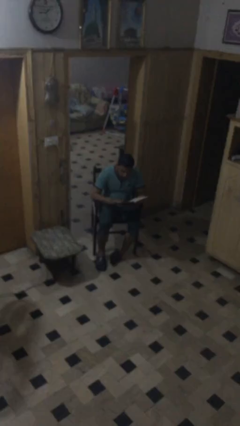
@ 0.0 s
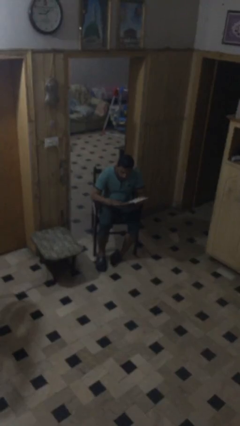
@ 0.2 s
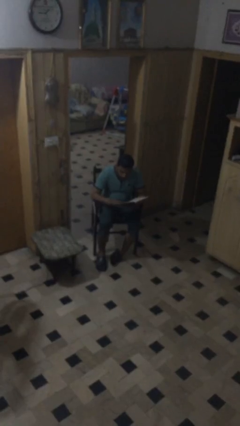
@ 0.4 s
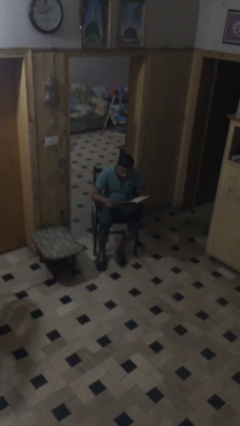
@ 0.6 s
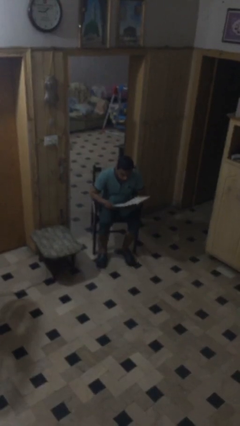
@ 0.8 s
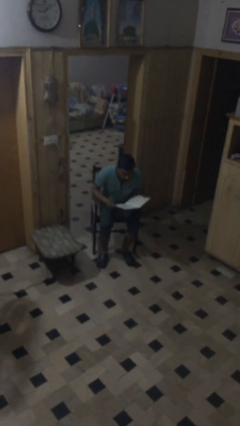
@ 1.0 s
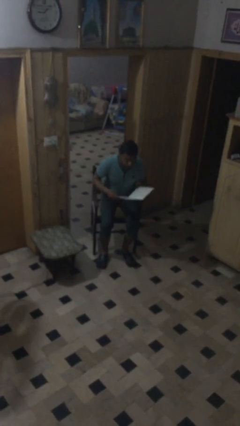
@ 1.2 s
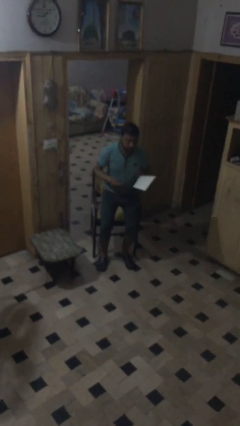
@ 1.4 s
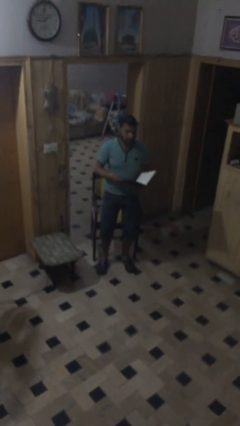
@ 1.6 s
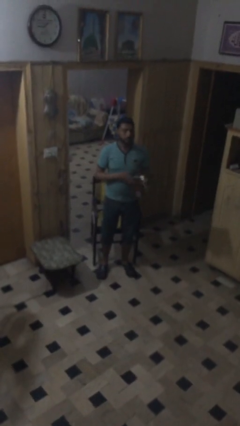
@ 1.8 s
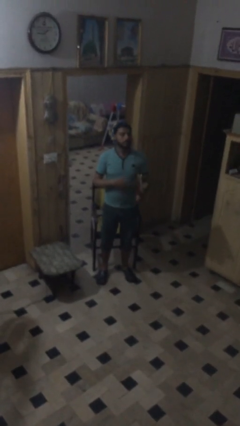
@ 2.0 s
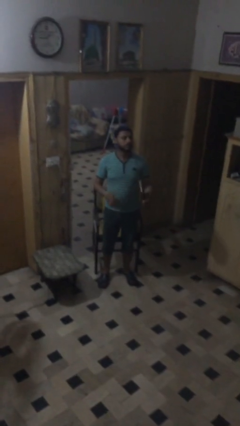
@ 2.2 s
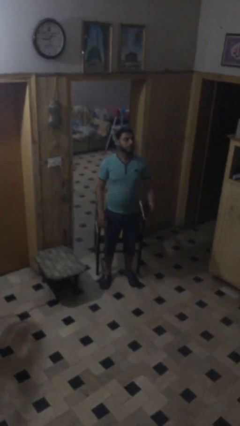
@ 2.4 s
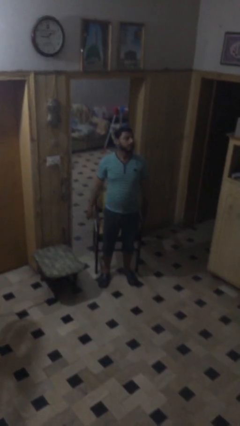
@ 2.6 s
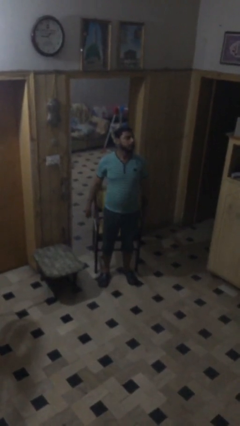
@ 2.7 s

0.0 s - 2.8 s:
person stands up

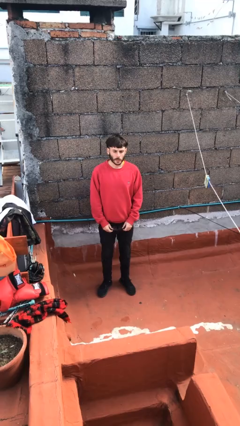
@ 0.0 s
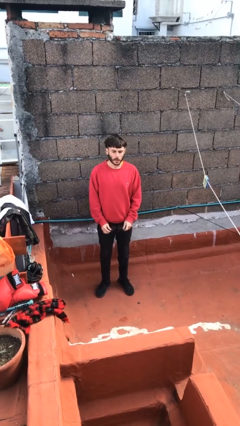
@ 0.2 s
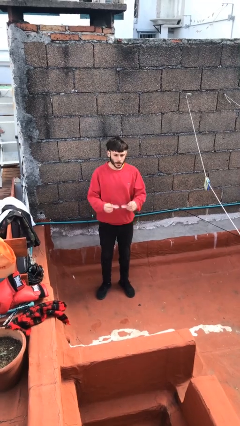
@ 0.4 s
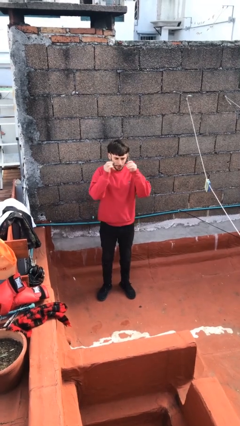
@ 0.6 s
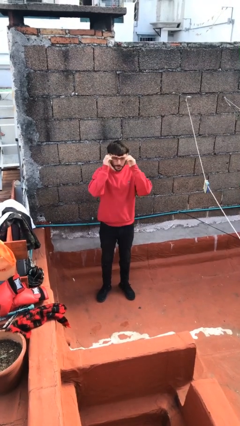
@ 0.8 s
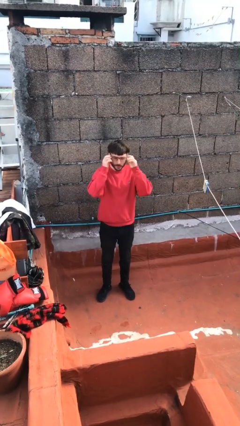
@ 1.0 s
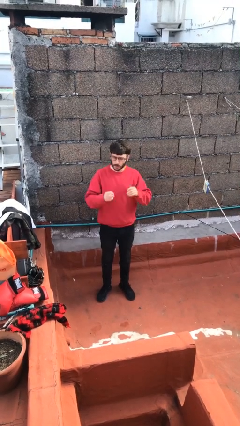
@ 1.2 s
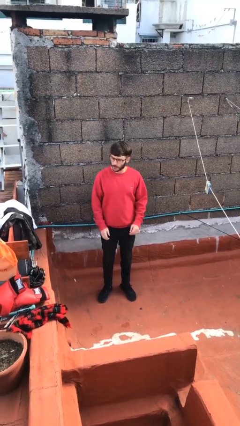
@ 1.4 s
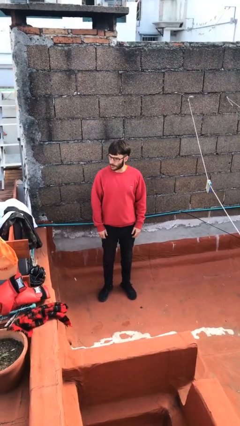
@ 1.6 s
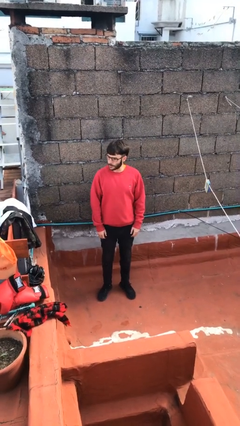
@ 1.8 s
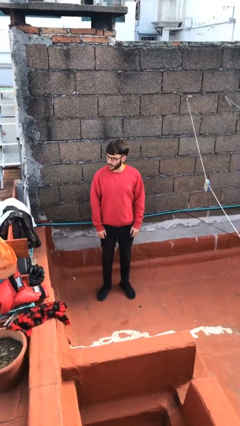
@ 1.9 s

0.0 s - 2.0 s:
person puts on glasses

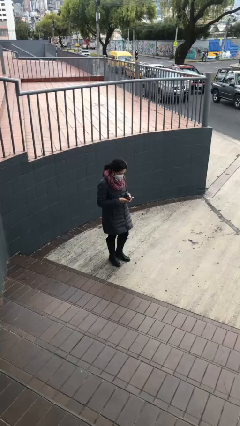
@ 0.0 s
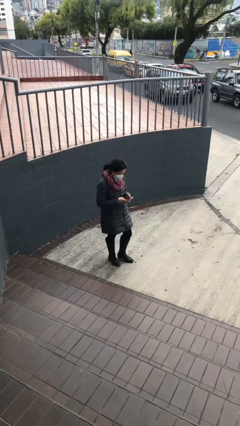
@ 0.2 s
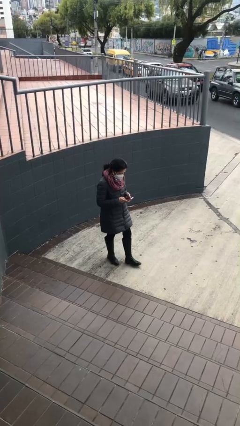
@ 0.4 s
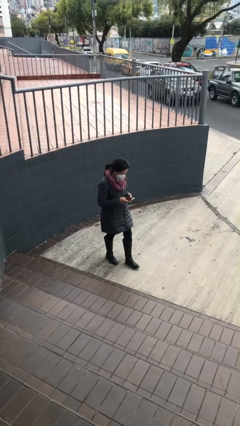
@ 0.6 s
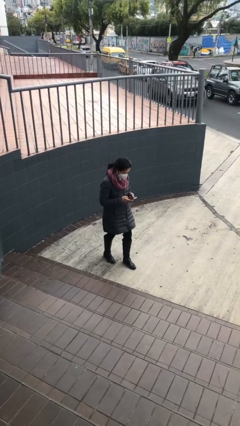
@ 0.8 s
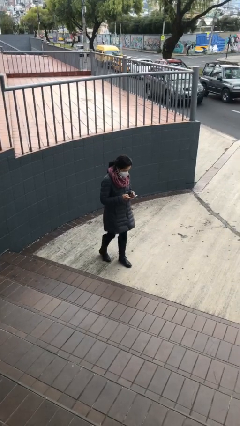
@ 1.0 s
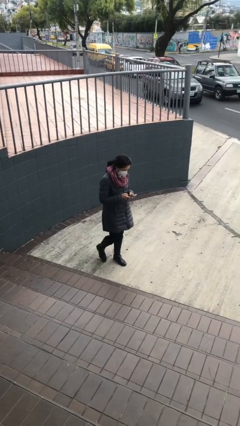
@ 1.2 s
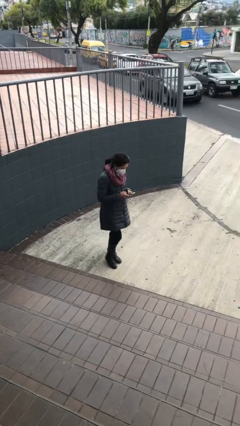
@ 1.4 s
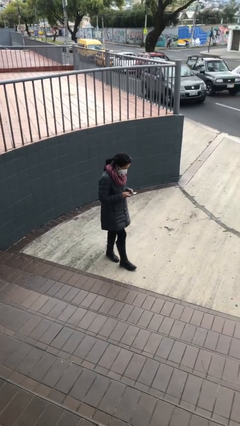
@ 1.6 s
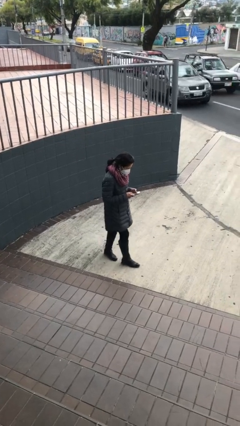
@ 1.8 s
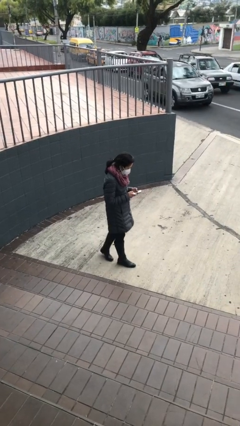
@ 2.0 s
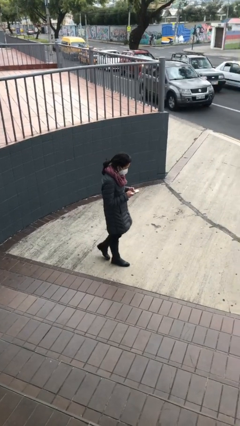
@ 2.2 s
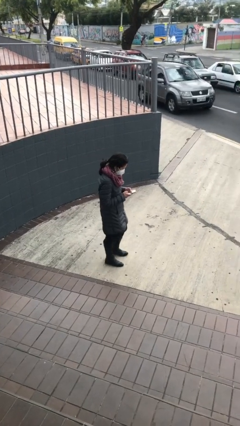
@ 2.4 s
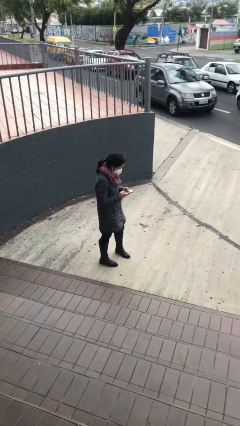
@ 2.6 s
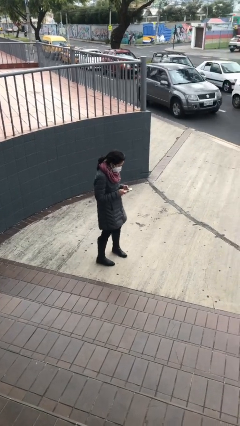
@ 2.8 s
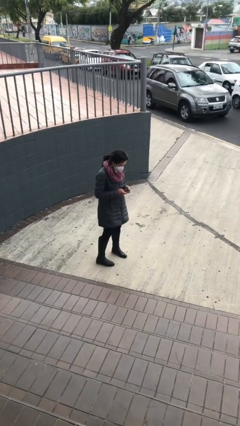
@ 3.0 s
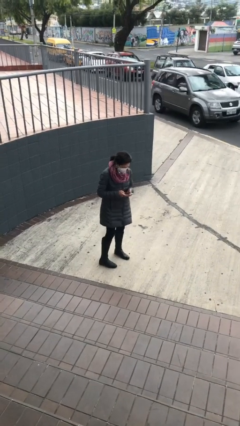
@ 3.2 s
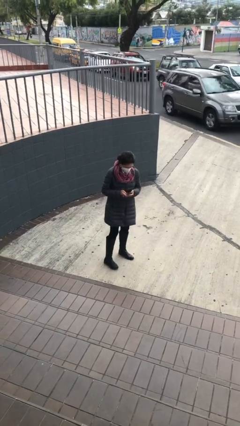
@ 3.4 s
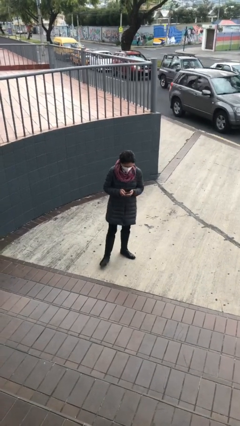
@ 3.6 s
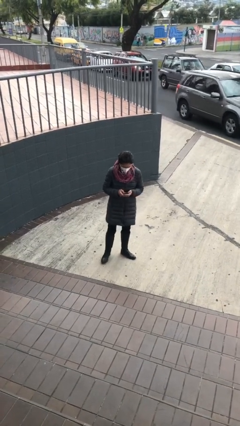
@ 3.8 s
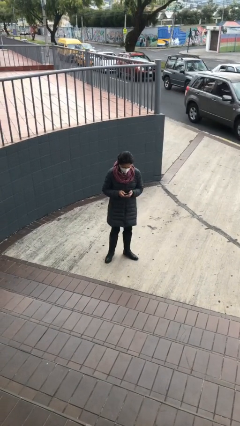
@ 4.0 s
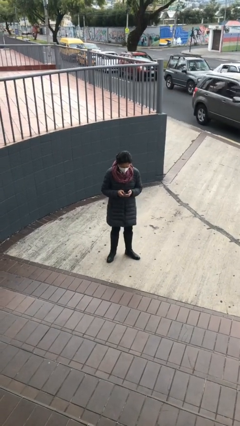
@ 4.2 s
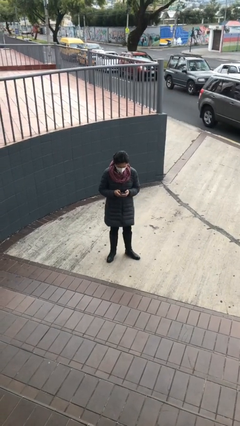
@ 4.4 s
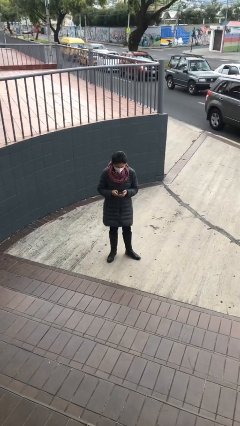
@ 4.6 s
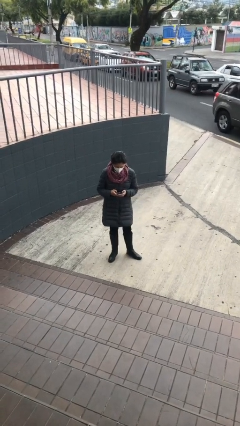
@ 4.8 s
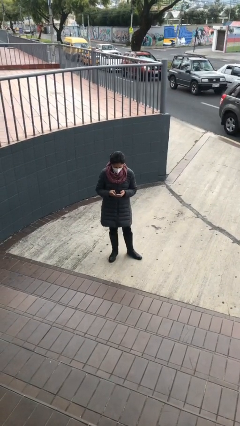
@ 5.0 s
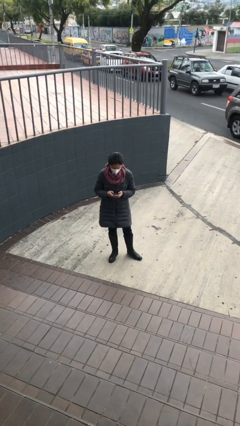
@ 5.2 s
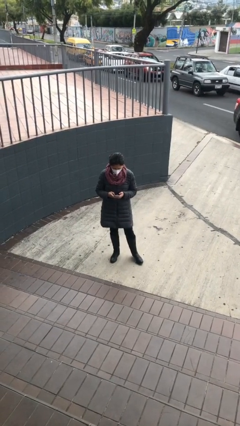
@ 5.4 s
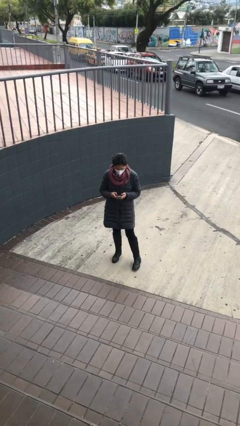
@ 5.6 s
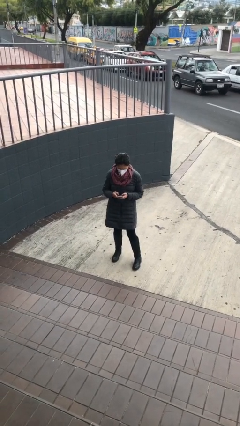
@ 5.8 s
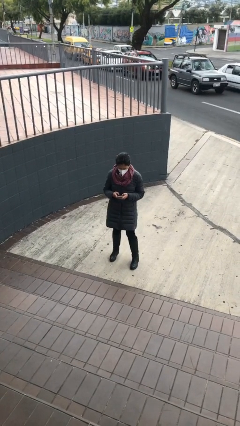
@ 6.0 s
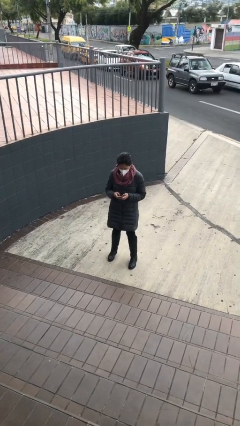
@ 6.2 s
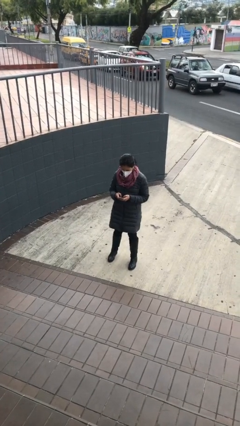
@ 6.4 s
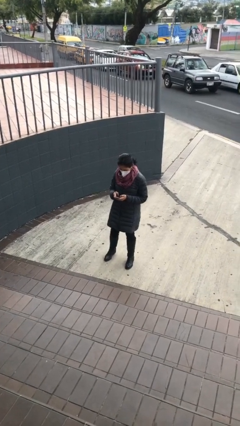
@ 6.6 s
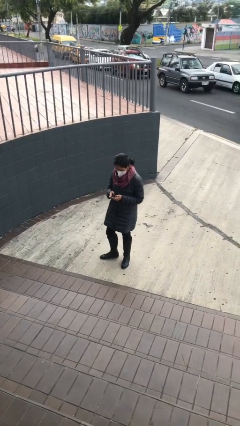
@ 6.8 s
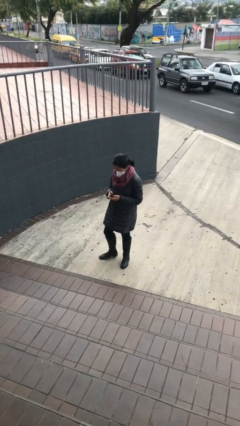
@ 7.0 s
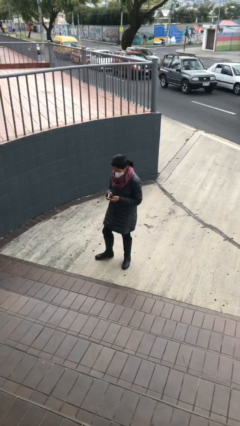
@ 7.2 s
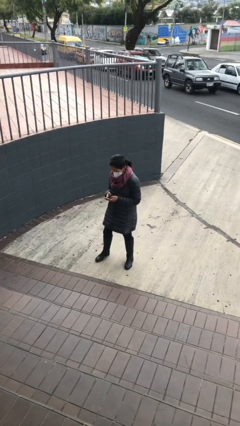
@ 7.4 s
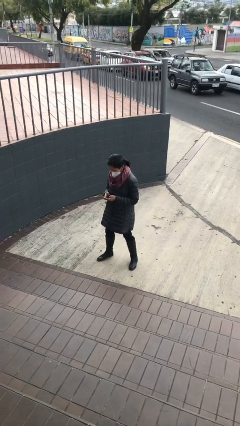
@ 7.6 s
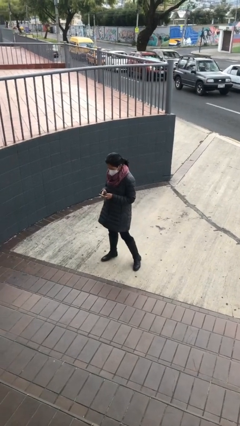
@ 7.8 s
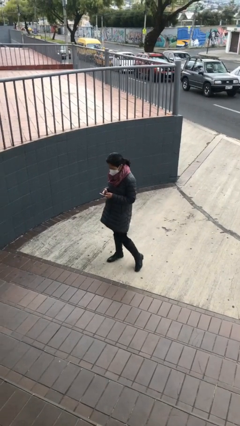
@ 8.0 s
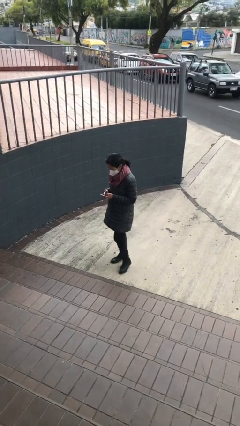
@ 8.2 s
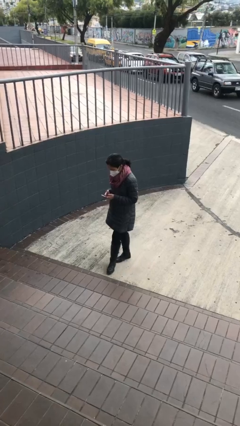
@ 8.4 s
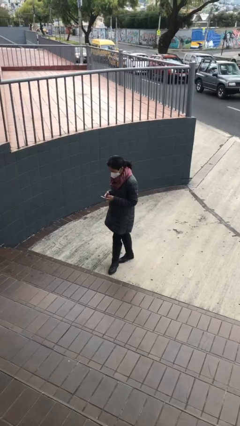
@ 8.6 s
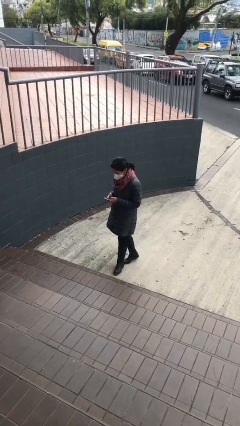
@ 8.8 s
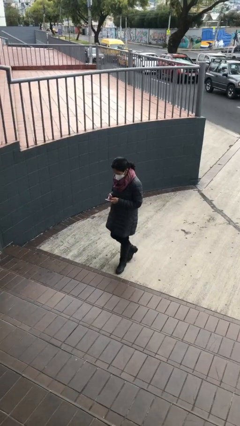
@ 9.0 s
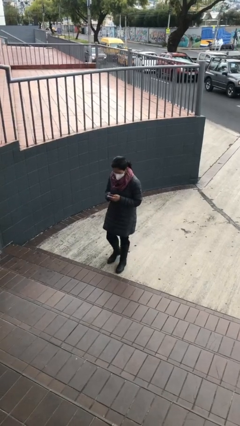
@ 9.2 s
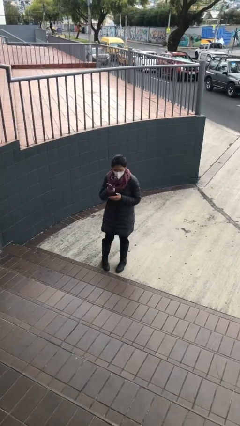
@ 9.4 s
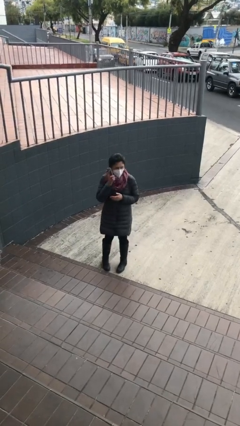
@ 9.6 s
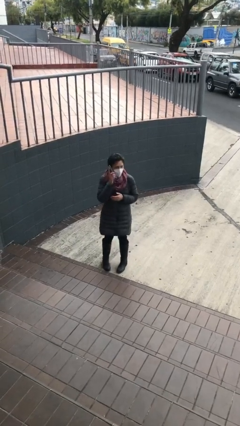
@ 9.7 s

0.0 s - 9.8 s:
person texts on phone

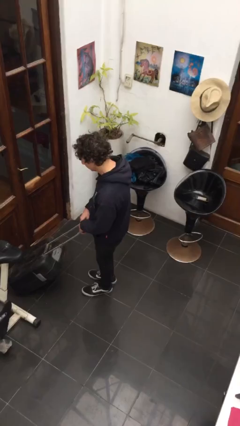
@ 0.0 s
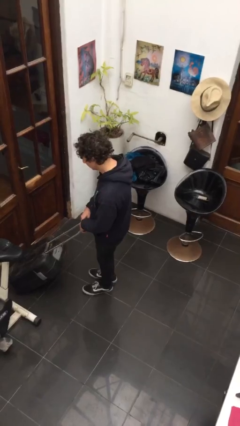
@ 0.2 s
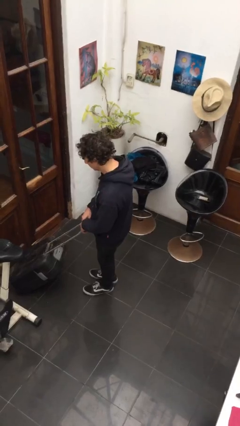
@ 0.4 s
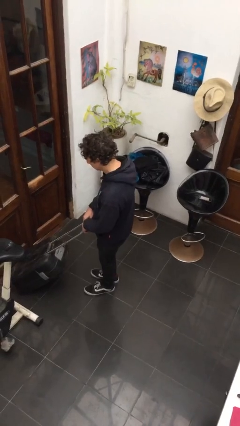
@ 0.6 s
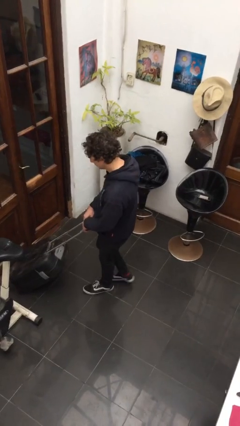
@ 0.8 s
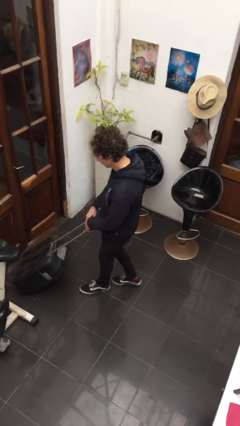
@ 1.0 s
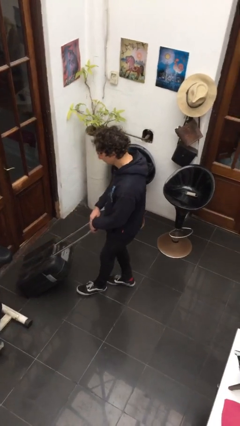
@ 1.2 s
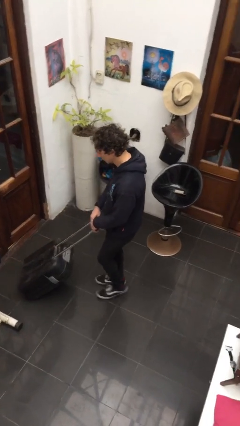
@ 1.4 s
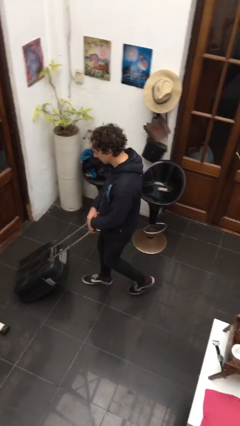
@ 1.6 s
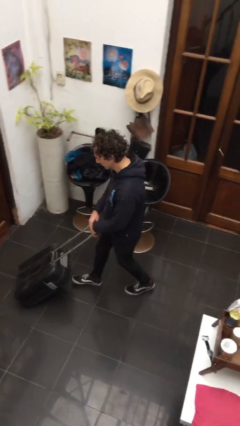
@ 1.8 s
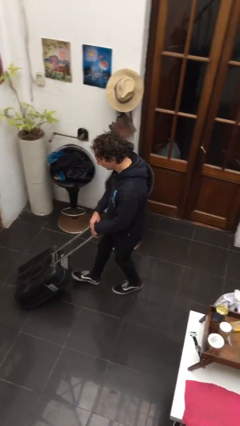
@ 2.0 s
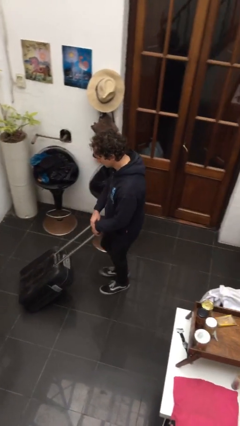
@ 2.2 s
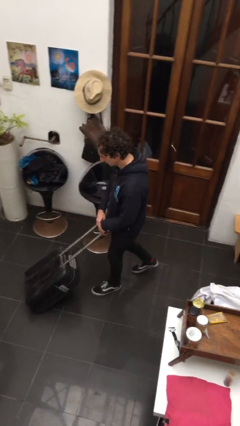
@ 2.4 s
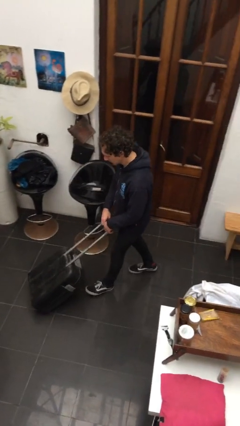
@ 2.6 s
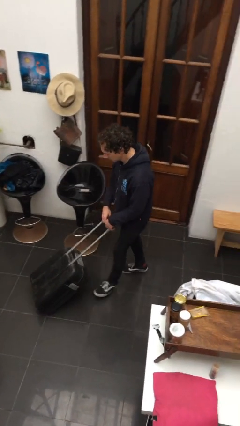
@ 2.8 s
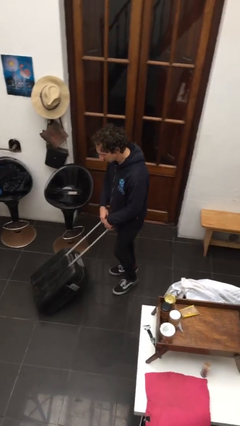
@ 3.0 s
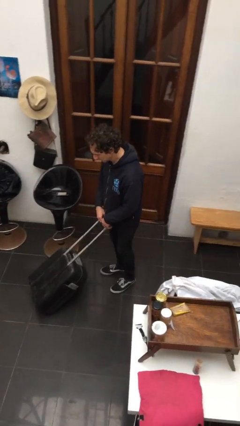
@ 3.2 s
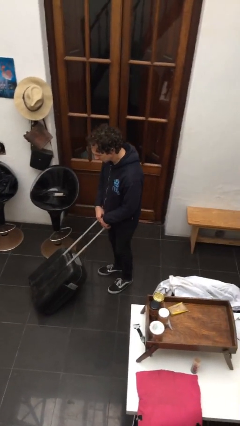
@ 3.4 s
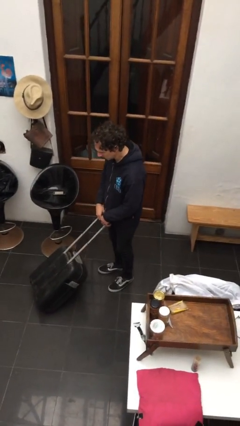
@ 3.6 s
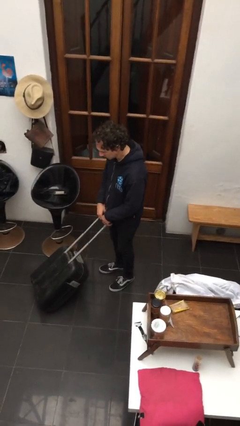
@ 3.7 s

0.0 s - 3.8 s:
person pulls wheeled cart
